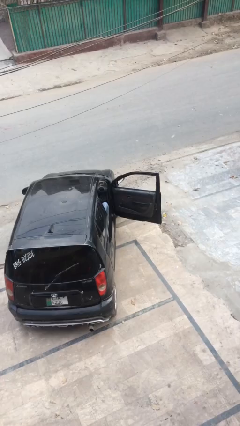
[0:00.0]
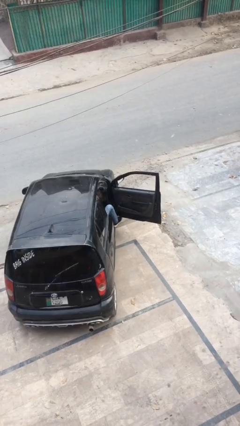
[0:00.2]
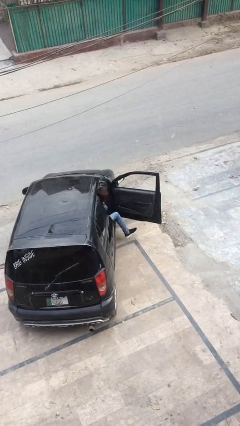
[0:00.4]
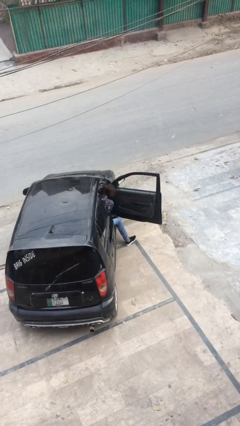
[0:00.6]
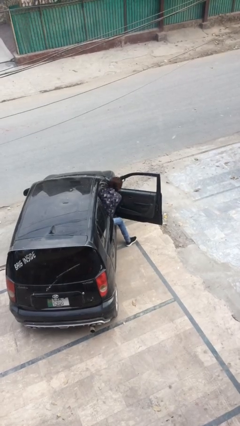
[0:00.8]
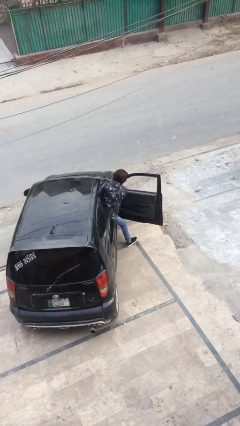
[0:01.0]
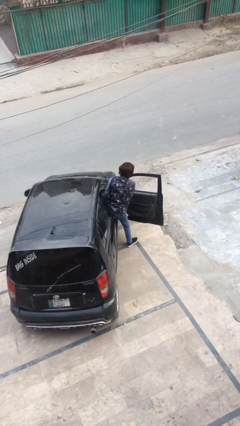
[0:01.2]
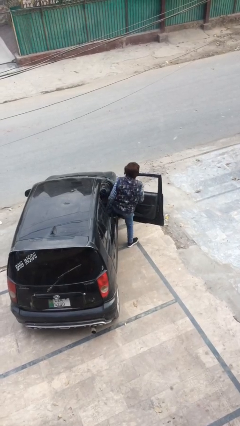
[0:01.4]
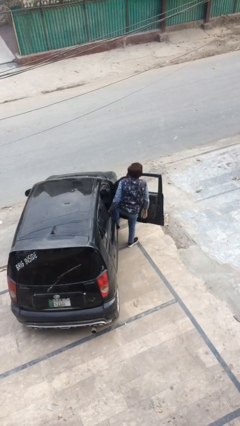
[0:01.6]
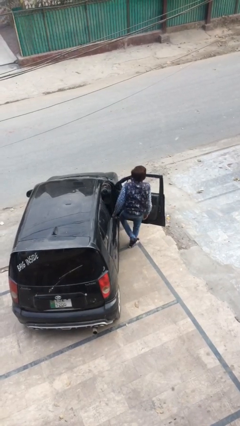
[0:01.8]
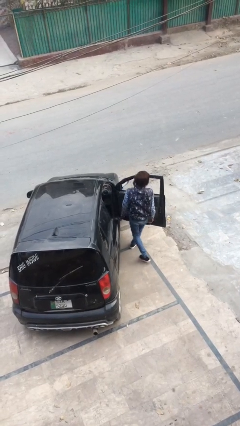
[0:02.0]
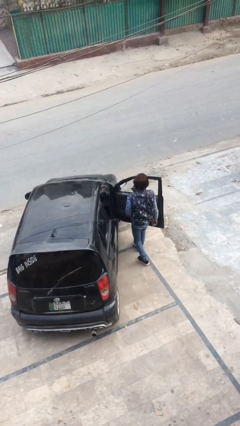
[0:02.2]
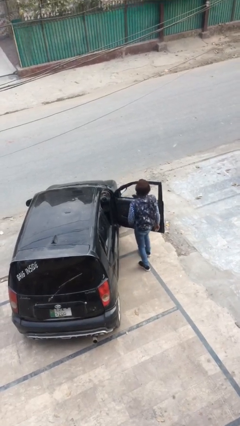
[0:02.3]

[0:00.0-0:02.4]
person exits car

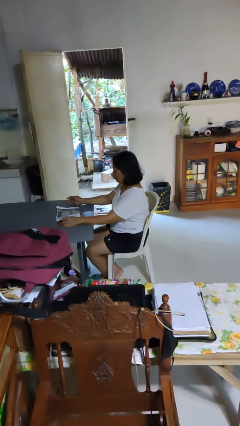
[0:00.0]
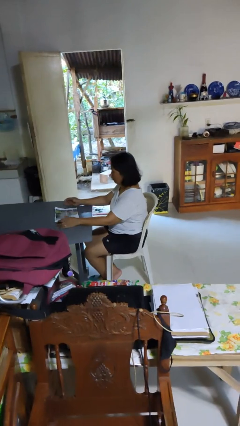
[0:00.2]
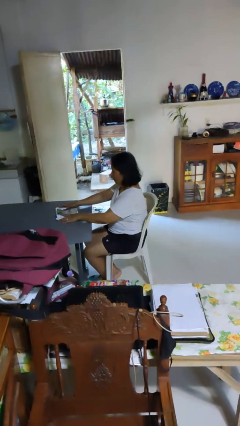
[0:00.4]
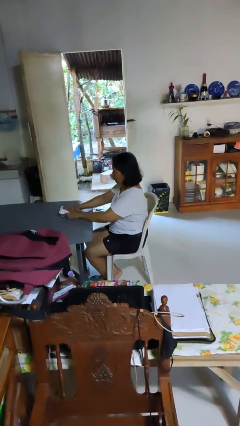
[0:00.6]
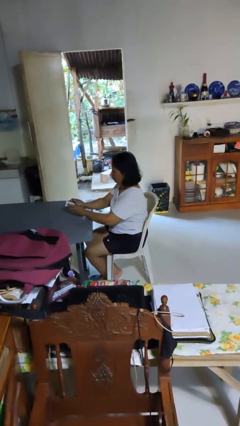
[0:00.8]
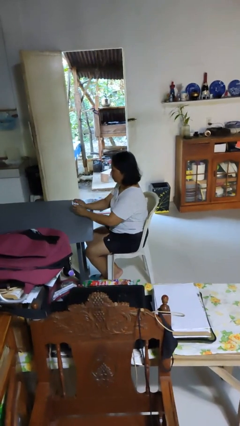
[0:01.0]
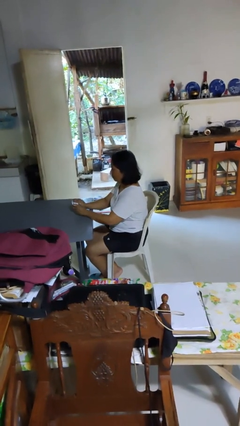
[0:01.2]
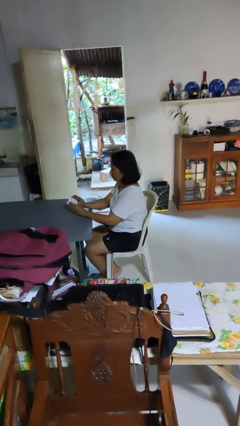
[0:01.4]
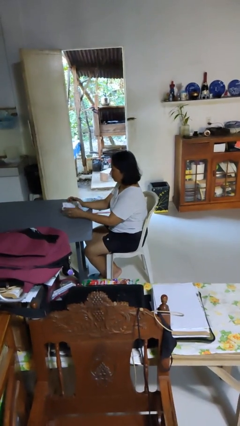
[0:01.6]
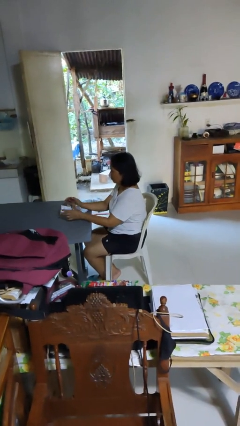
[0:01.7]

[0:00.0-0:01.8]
person crumples paper

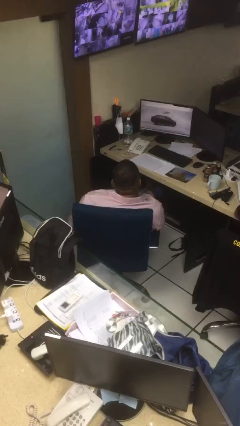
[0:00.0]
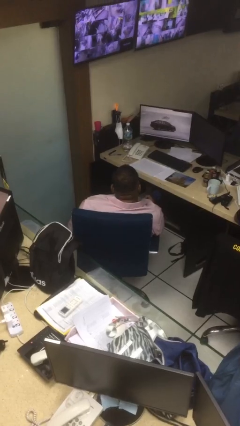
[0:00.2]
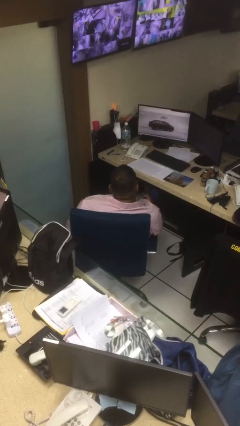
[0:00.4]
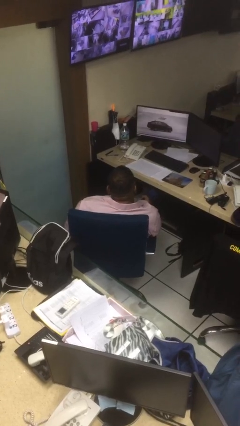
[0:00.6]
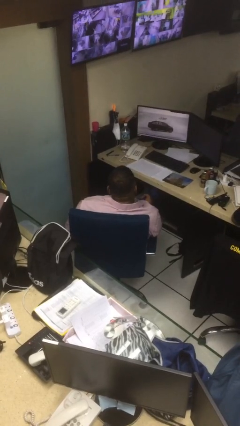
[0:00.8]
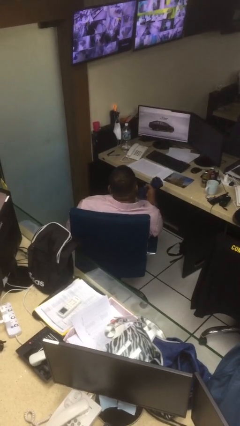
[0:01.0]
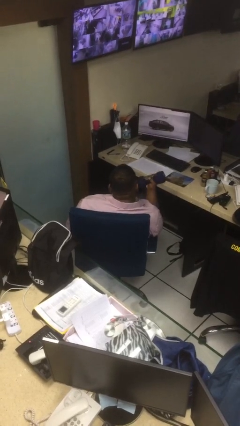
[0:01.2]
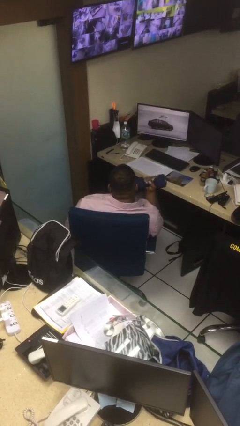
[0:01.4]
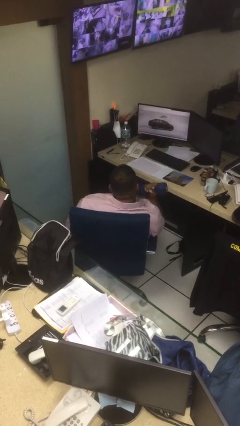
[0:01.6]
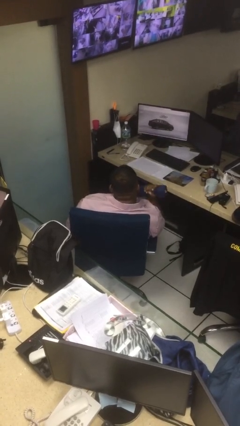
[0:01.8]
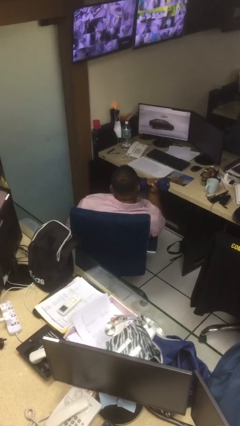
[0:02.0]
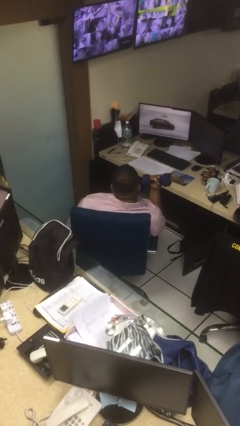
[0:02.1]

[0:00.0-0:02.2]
person lifts dumbbells

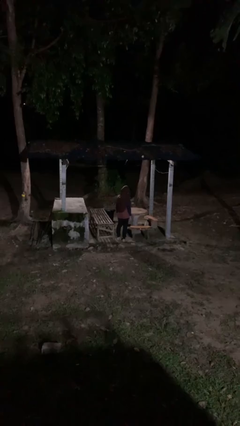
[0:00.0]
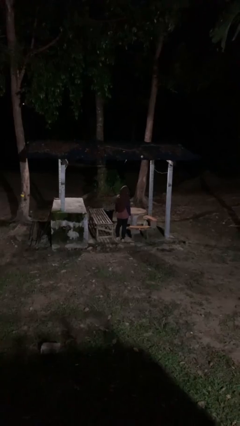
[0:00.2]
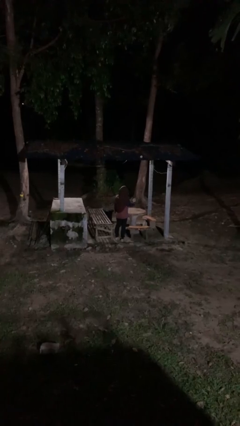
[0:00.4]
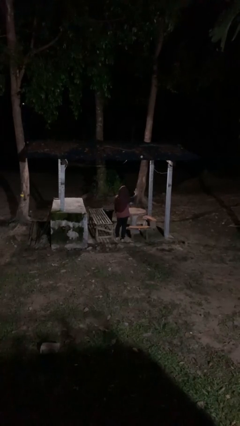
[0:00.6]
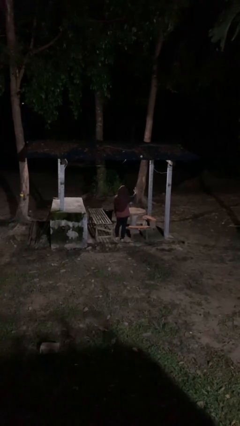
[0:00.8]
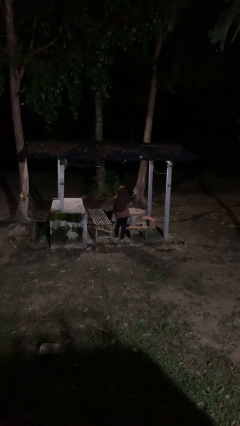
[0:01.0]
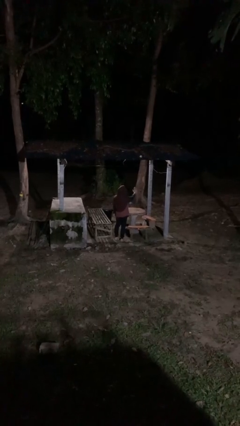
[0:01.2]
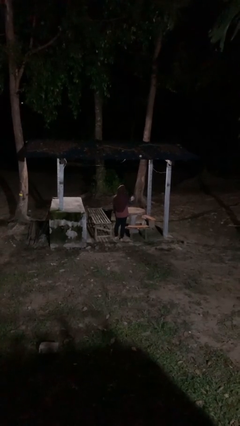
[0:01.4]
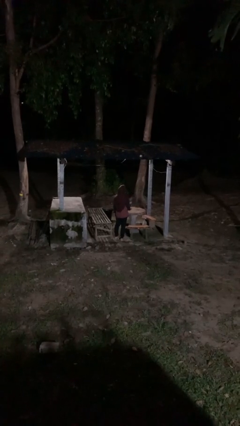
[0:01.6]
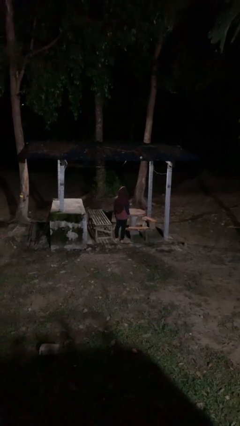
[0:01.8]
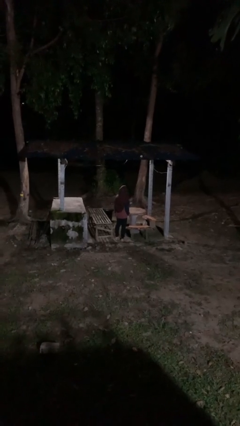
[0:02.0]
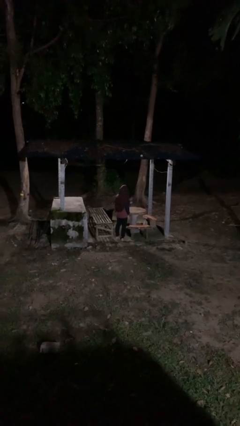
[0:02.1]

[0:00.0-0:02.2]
person gestures stop

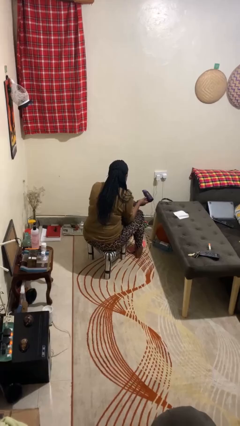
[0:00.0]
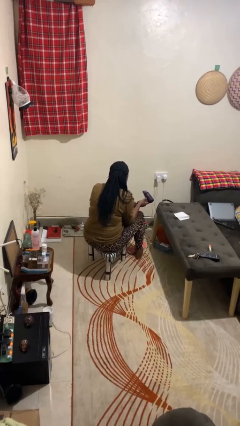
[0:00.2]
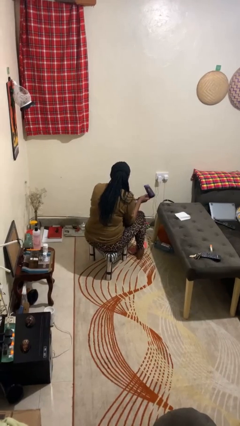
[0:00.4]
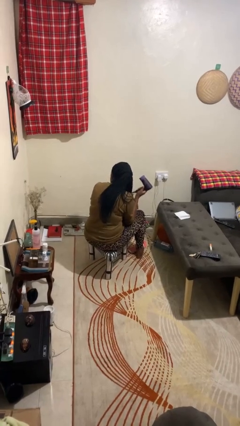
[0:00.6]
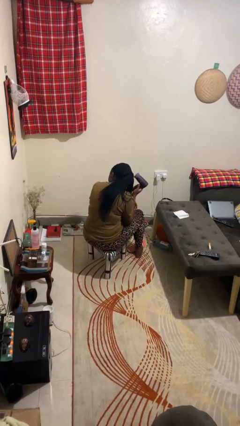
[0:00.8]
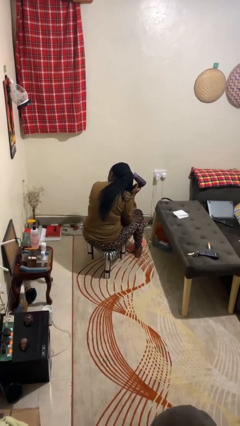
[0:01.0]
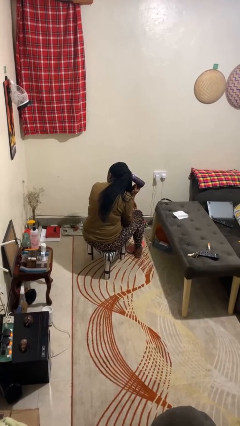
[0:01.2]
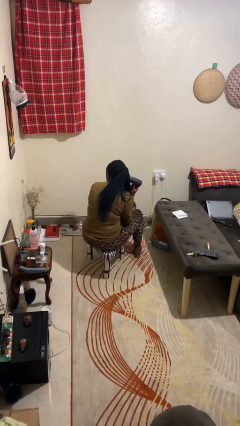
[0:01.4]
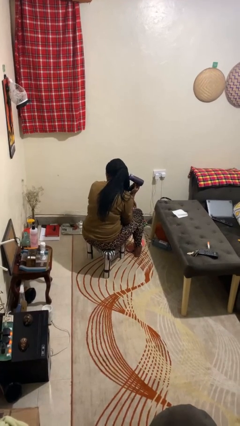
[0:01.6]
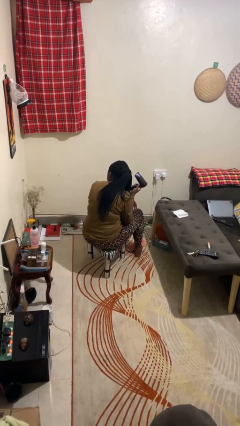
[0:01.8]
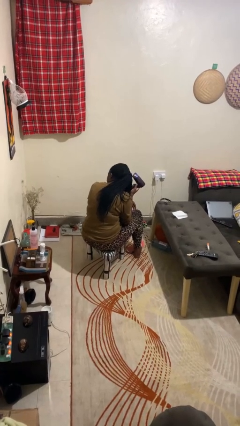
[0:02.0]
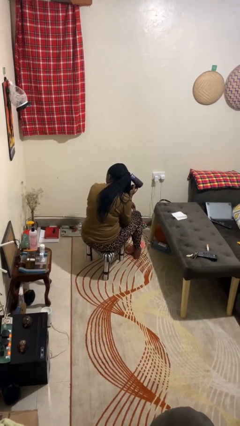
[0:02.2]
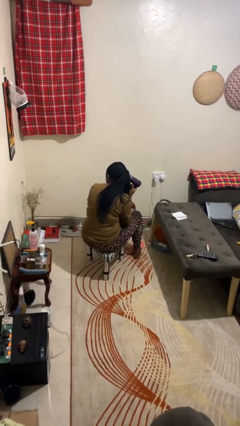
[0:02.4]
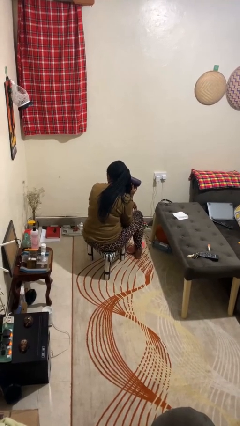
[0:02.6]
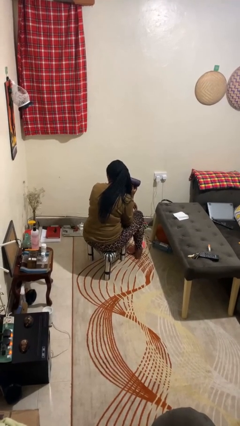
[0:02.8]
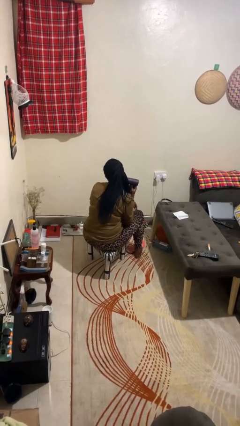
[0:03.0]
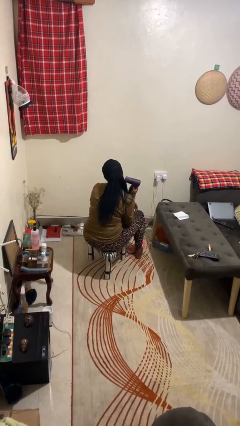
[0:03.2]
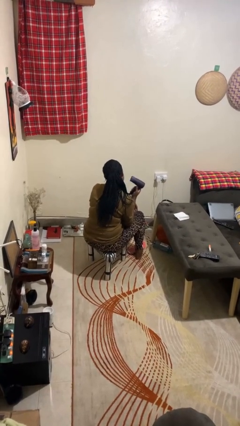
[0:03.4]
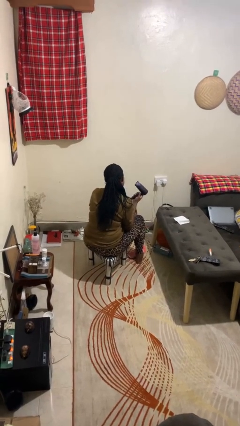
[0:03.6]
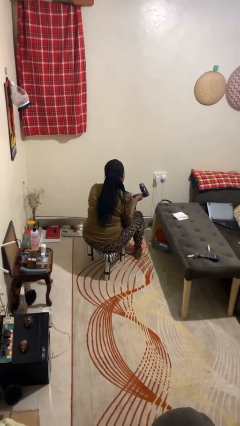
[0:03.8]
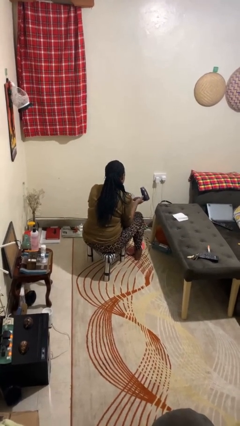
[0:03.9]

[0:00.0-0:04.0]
person dries hair with hairdryer

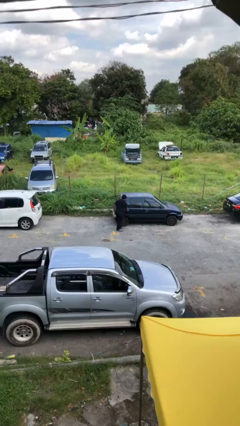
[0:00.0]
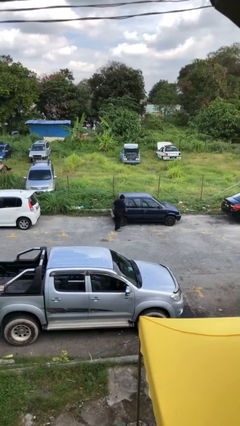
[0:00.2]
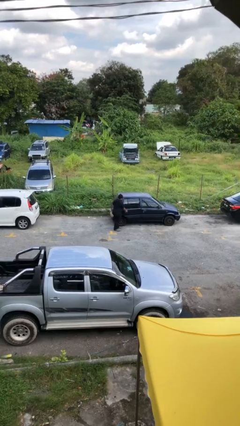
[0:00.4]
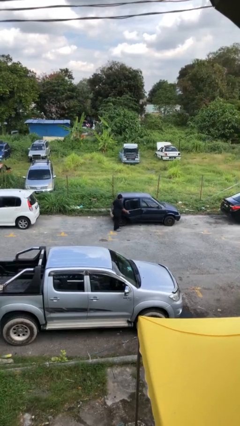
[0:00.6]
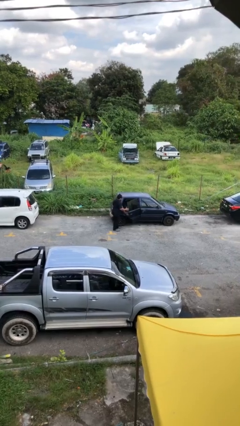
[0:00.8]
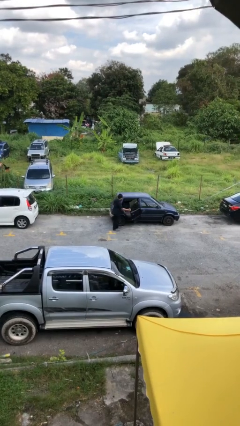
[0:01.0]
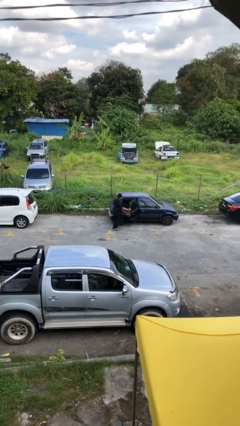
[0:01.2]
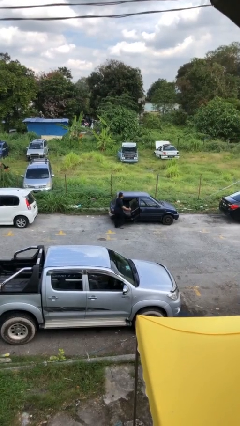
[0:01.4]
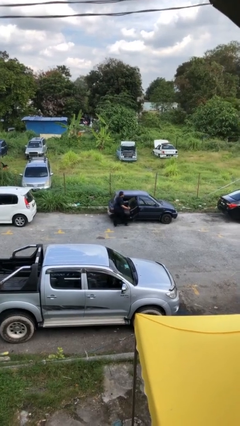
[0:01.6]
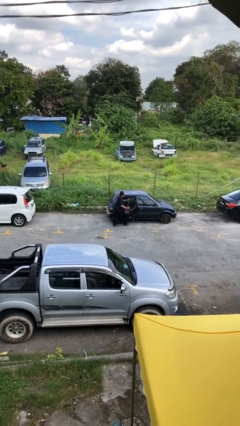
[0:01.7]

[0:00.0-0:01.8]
person opens car door

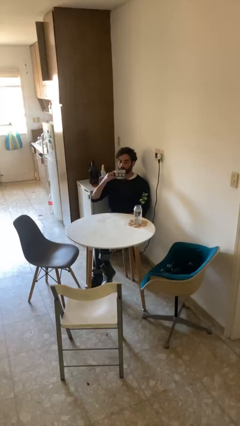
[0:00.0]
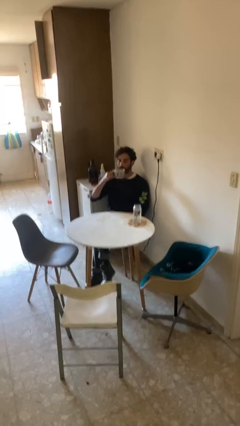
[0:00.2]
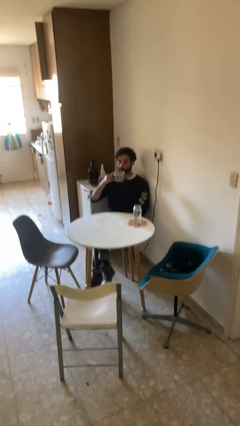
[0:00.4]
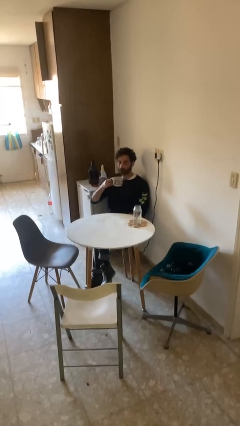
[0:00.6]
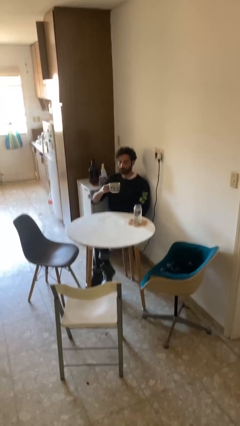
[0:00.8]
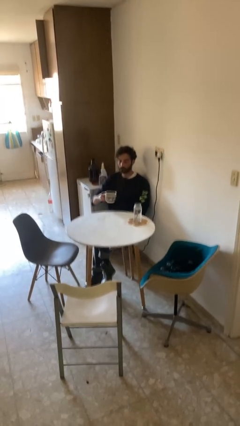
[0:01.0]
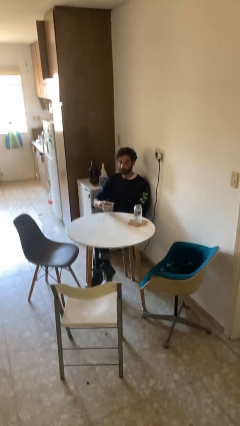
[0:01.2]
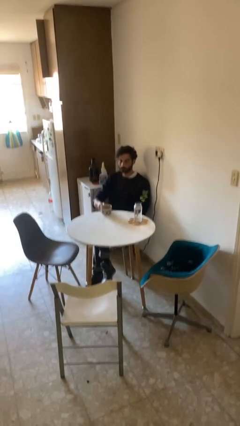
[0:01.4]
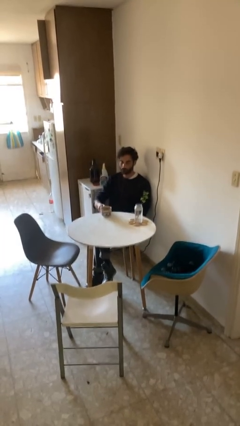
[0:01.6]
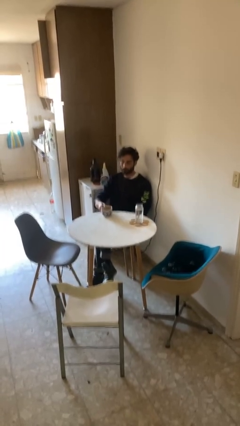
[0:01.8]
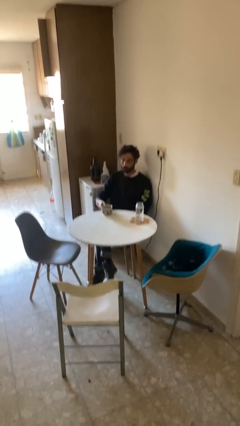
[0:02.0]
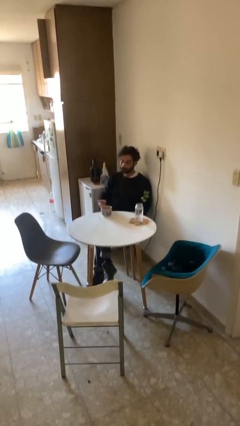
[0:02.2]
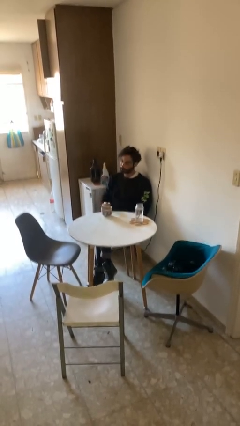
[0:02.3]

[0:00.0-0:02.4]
person puts down object on table

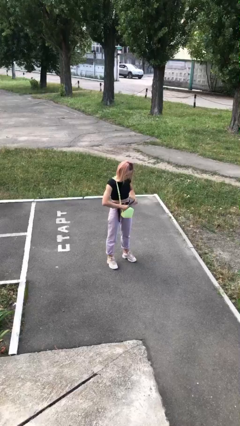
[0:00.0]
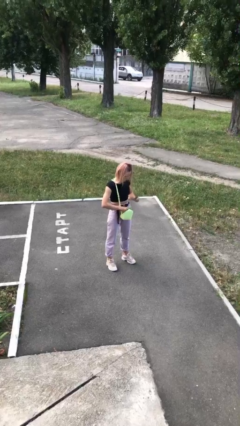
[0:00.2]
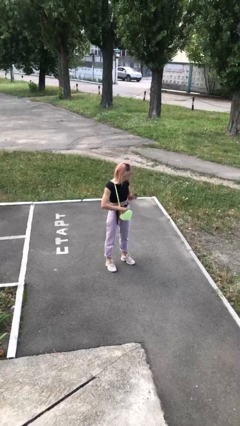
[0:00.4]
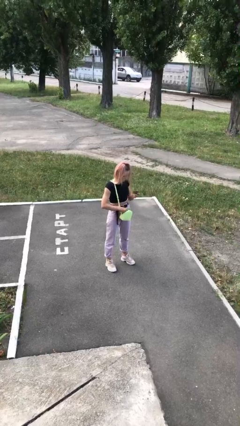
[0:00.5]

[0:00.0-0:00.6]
person takes object from backpack
